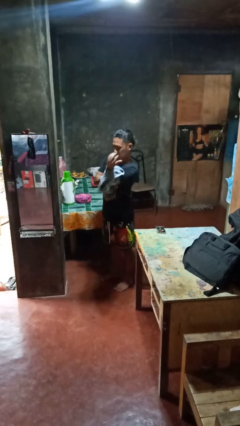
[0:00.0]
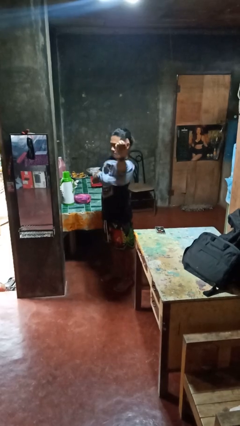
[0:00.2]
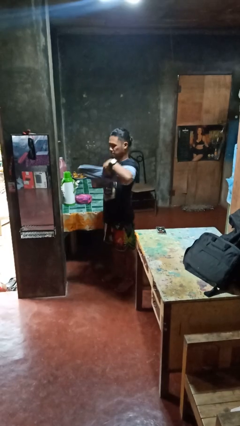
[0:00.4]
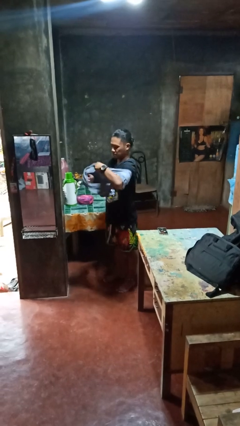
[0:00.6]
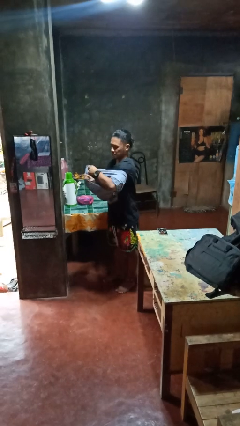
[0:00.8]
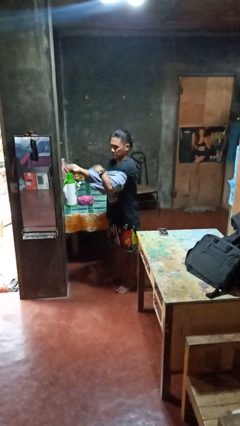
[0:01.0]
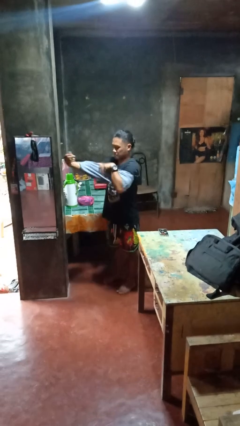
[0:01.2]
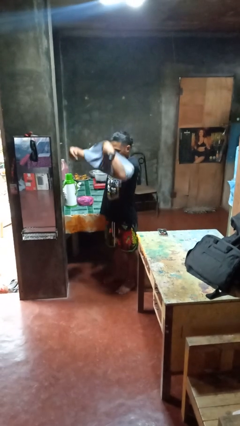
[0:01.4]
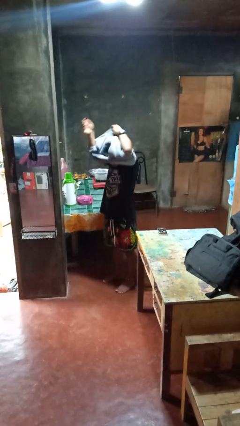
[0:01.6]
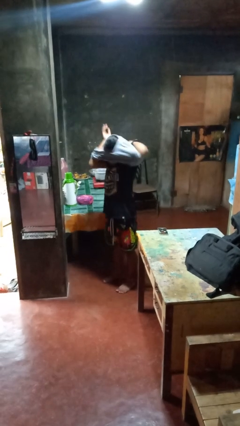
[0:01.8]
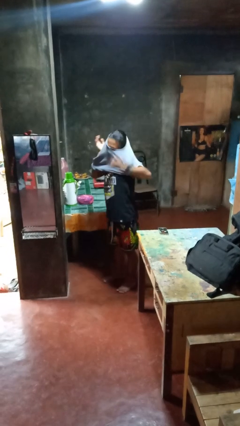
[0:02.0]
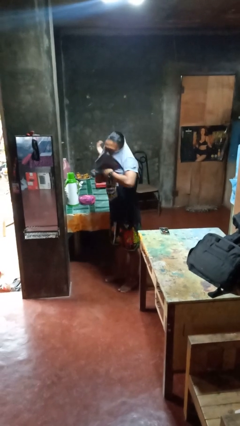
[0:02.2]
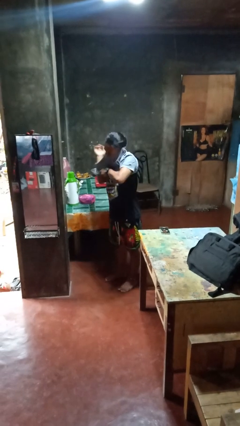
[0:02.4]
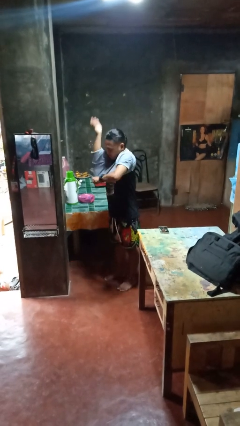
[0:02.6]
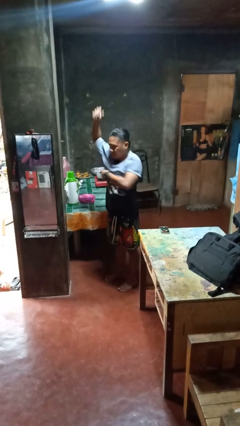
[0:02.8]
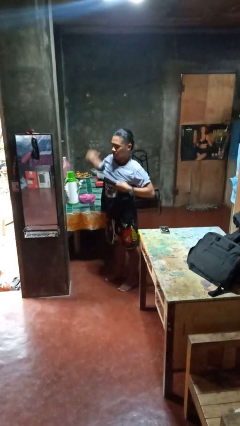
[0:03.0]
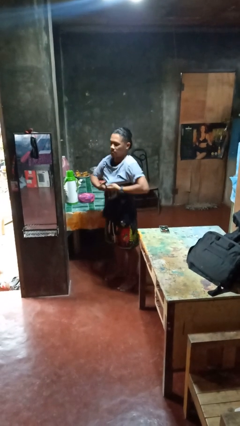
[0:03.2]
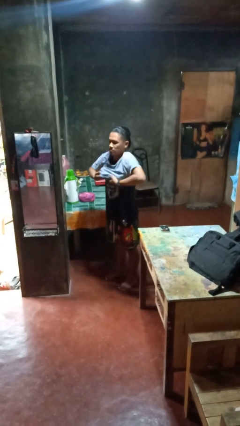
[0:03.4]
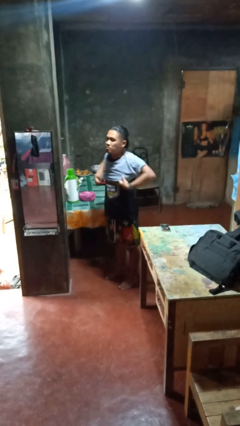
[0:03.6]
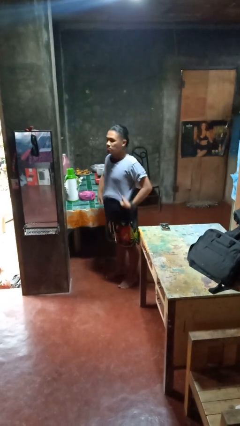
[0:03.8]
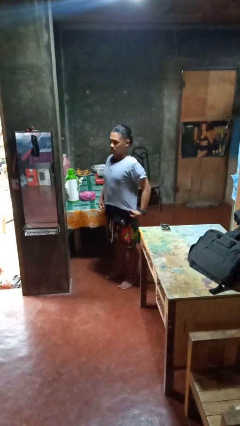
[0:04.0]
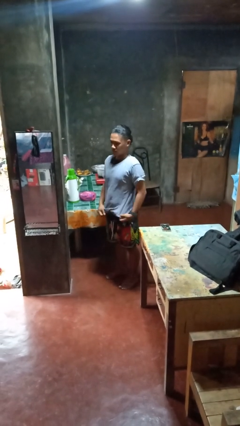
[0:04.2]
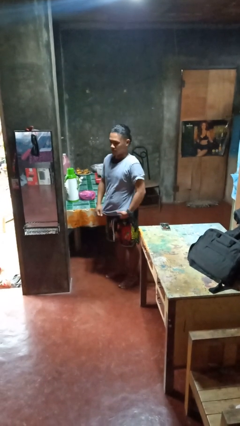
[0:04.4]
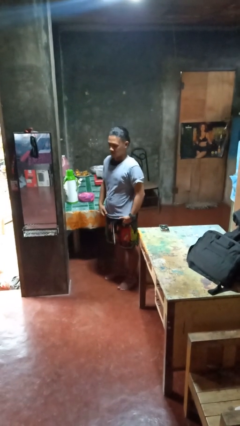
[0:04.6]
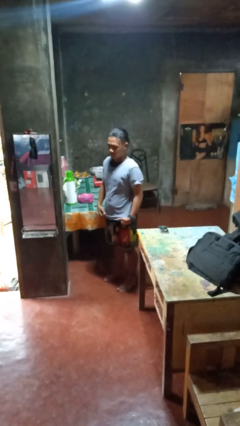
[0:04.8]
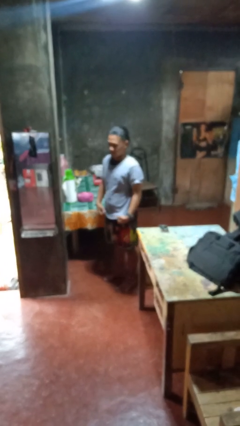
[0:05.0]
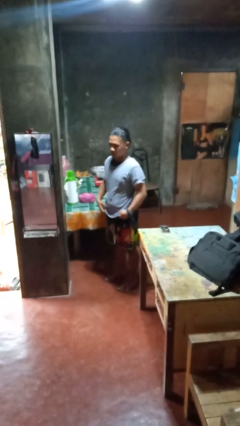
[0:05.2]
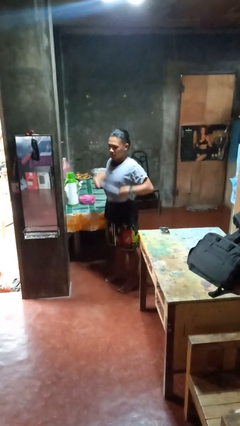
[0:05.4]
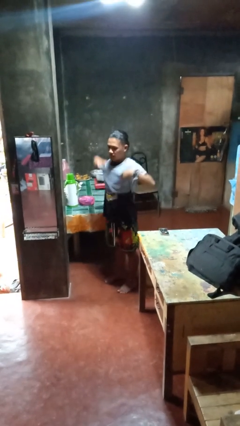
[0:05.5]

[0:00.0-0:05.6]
person puts on shirt

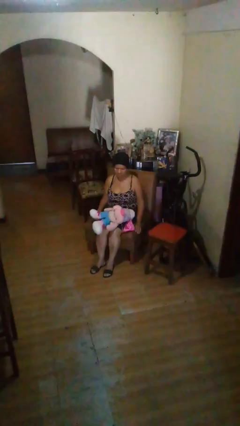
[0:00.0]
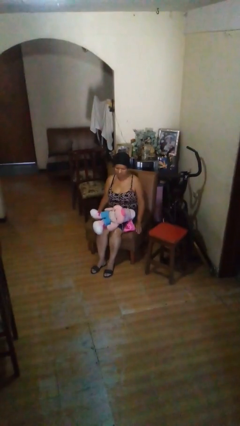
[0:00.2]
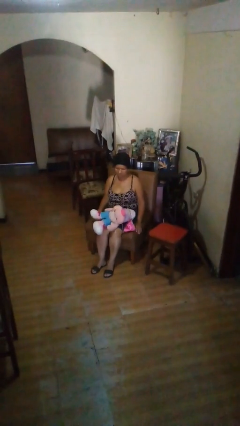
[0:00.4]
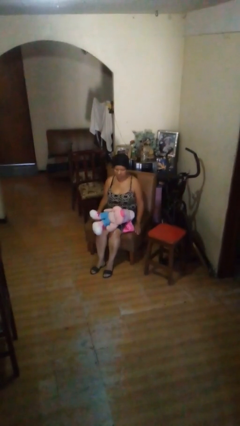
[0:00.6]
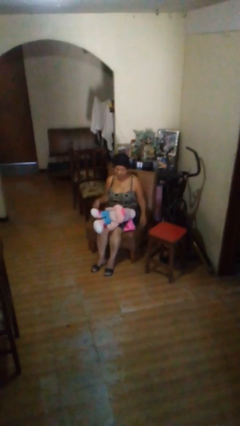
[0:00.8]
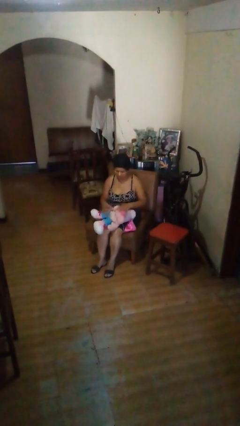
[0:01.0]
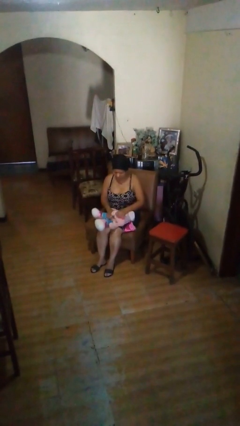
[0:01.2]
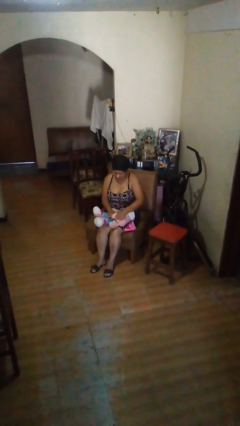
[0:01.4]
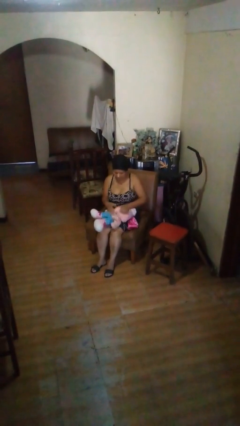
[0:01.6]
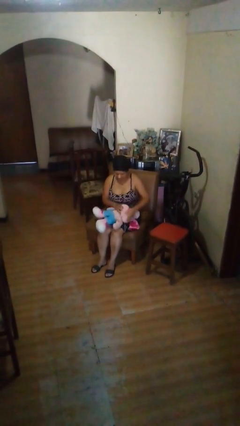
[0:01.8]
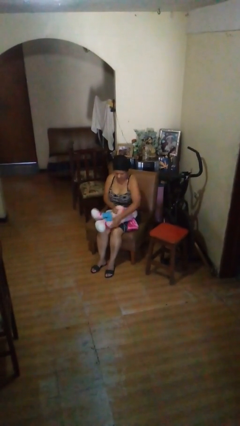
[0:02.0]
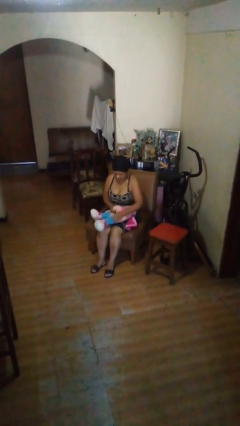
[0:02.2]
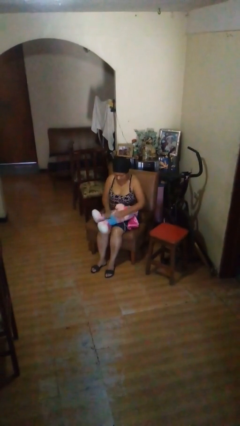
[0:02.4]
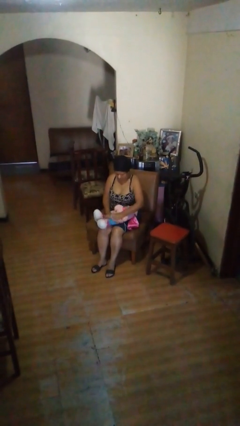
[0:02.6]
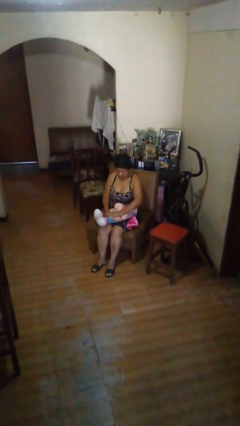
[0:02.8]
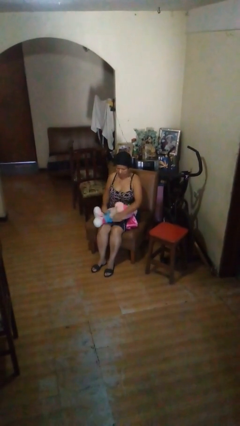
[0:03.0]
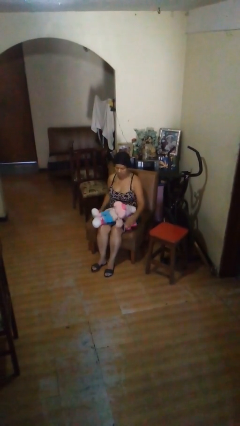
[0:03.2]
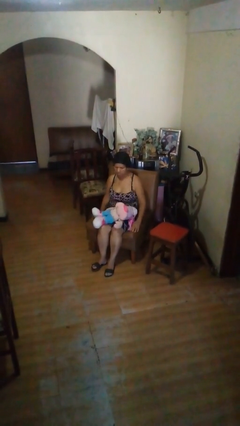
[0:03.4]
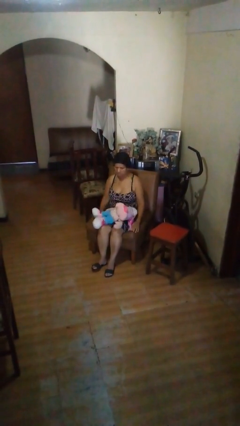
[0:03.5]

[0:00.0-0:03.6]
person squeezes object

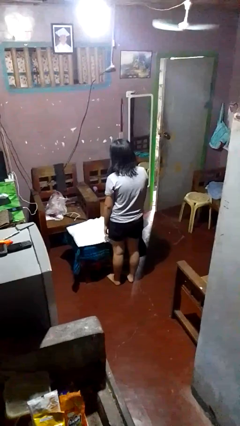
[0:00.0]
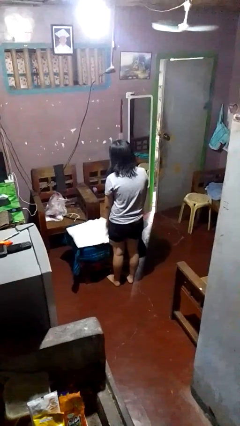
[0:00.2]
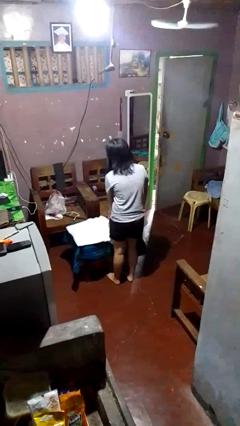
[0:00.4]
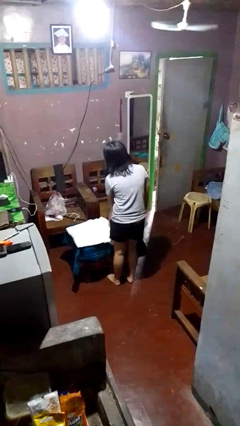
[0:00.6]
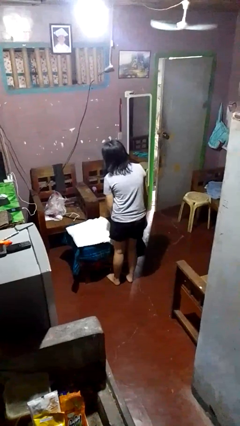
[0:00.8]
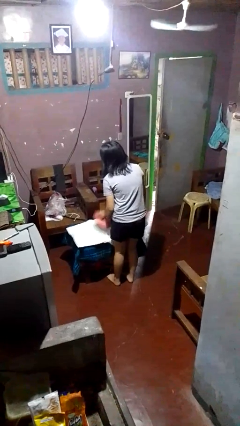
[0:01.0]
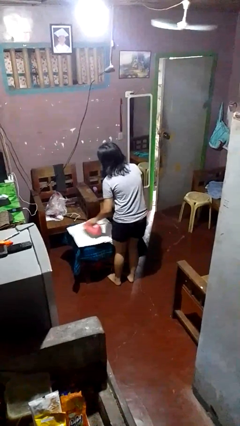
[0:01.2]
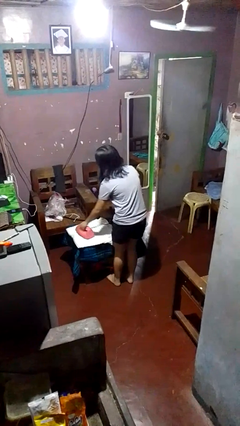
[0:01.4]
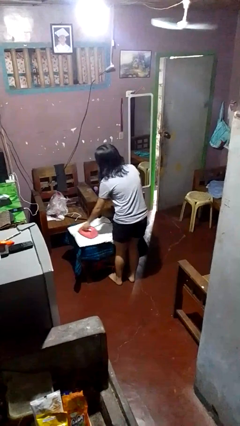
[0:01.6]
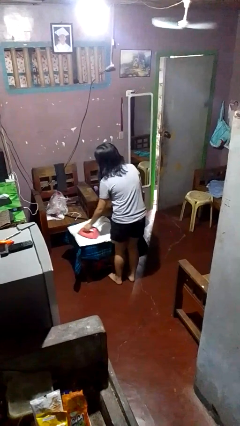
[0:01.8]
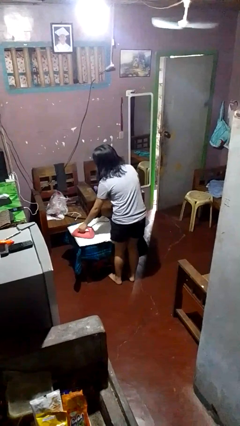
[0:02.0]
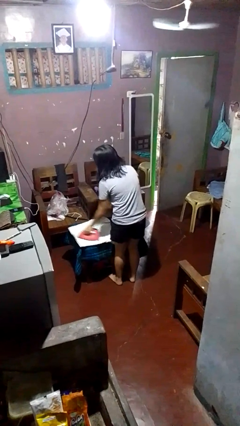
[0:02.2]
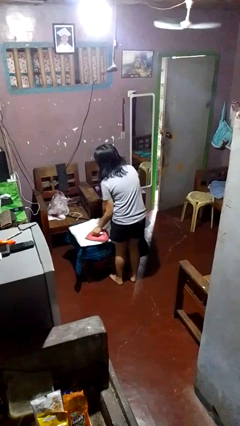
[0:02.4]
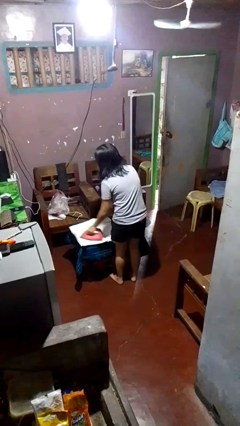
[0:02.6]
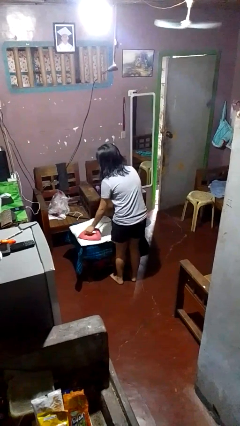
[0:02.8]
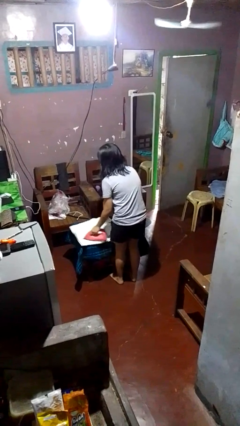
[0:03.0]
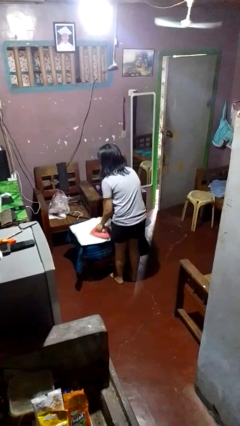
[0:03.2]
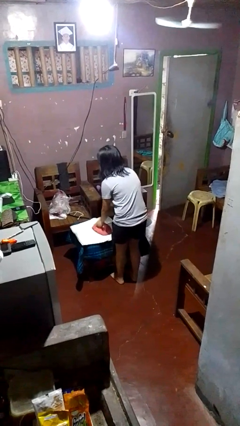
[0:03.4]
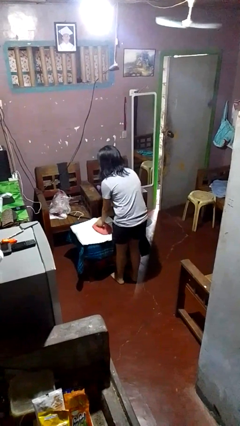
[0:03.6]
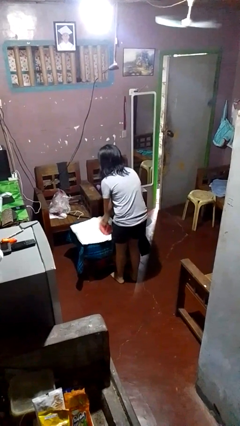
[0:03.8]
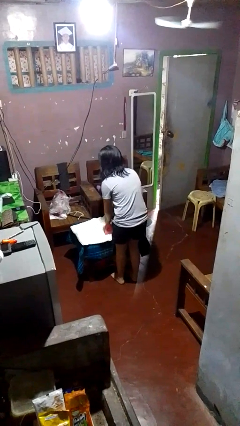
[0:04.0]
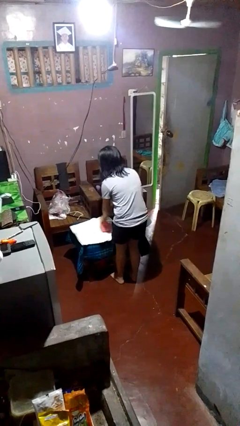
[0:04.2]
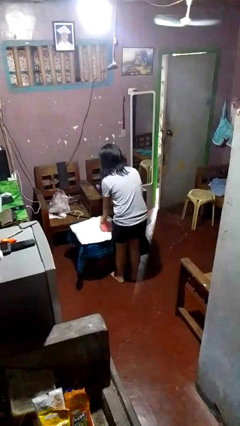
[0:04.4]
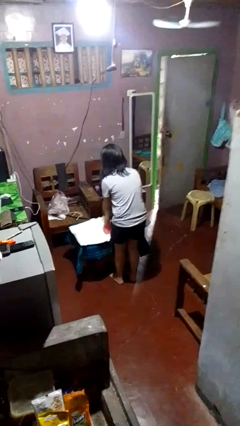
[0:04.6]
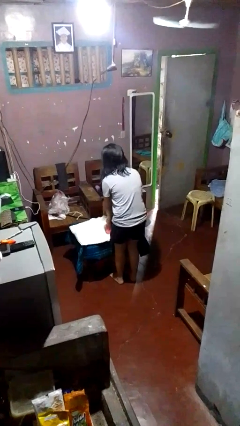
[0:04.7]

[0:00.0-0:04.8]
person irons clothes

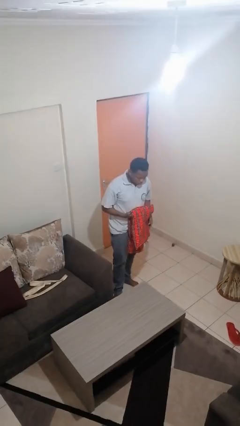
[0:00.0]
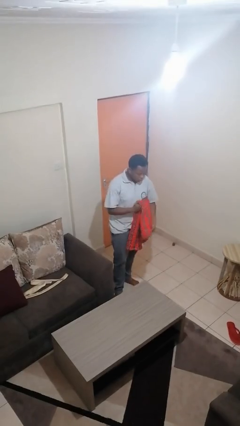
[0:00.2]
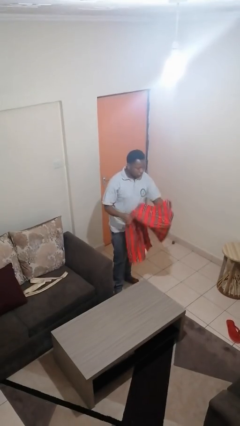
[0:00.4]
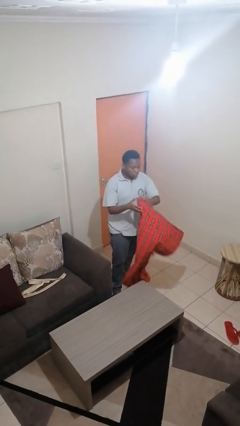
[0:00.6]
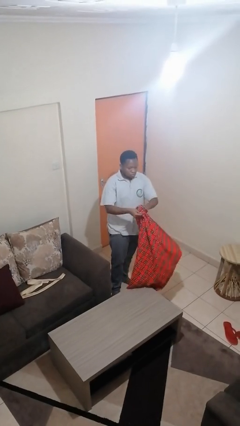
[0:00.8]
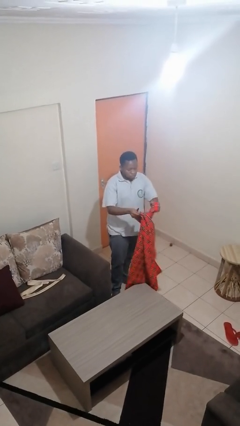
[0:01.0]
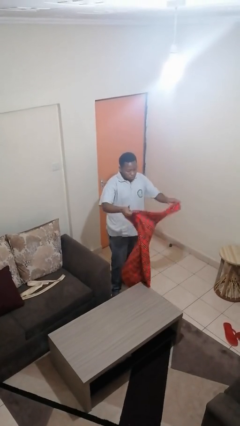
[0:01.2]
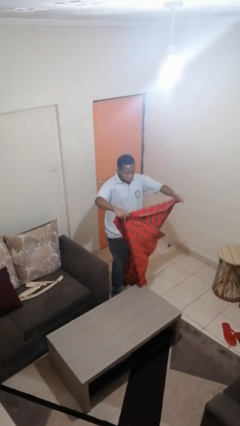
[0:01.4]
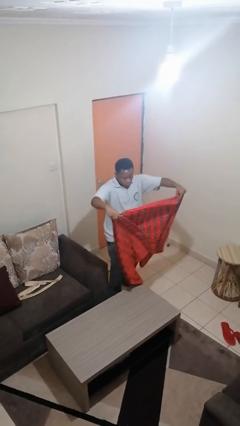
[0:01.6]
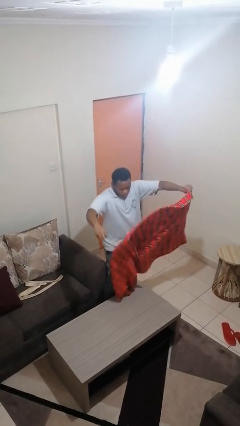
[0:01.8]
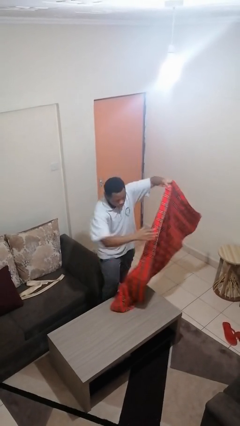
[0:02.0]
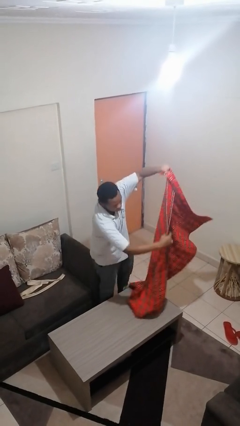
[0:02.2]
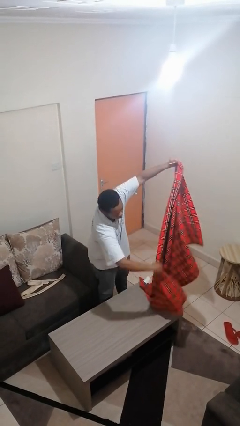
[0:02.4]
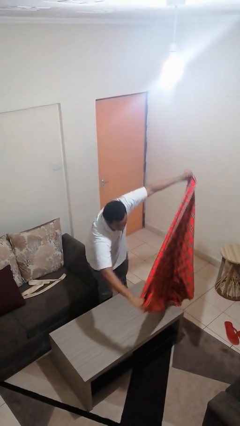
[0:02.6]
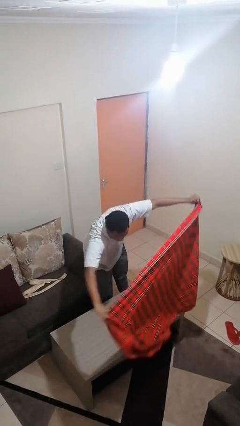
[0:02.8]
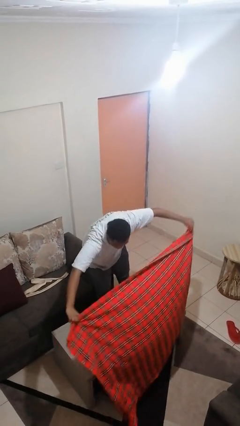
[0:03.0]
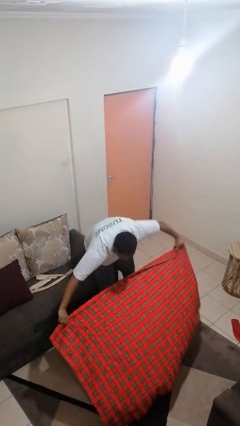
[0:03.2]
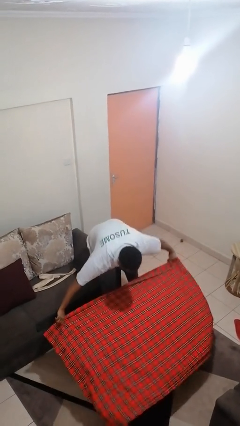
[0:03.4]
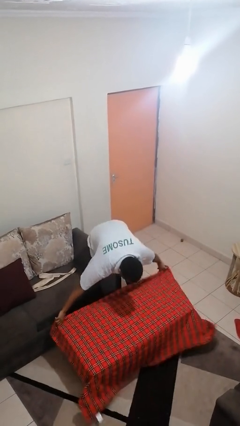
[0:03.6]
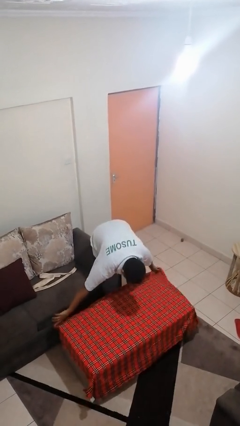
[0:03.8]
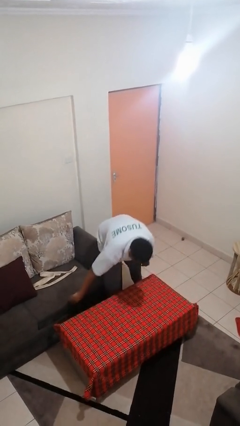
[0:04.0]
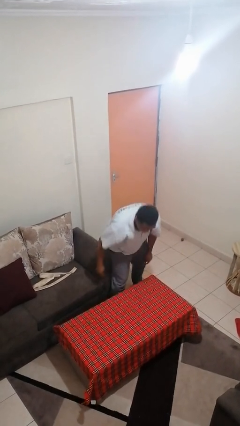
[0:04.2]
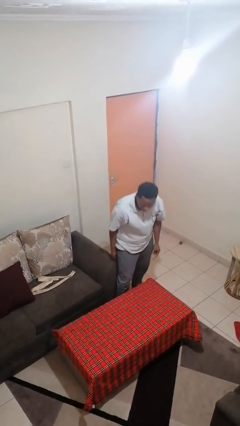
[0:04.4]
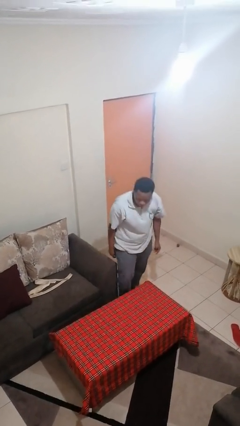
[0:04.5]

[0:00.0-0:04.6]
person spreads tablecloth
